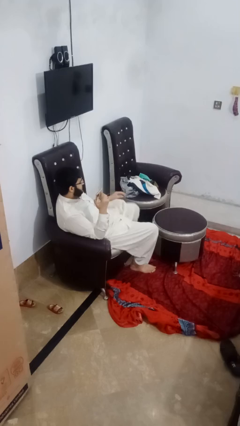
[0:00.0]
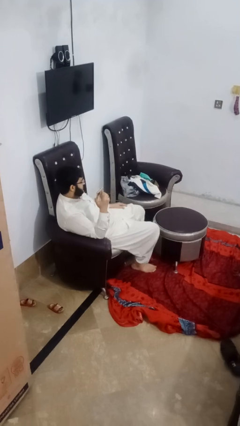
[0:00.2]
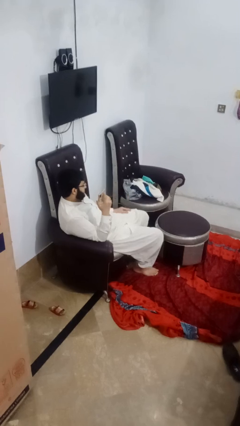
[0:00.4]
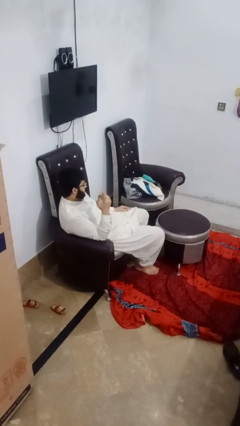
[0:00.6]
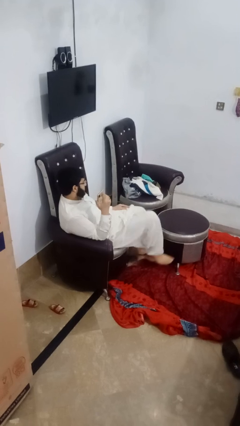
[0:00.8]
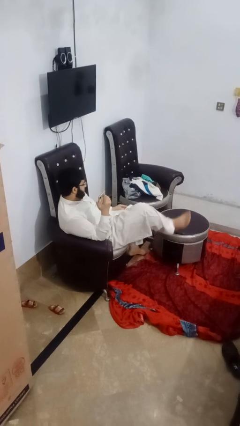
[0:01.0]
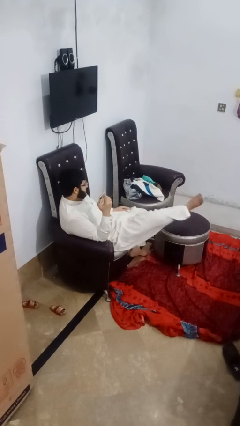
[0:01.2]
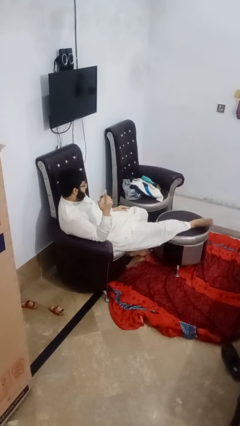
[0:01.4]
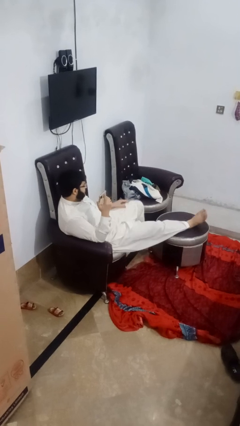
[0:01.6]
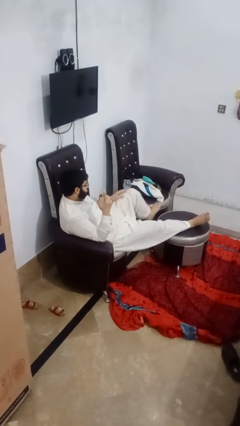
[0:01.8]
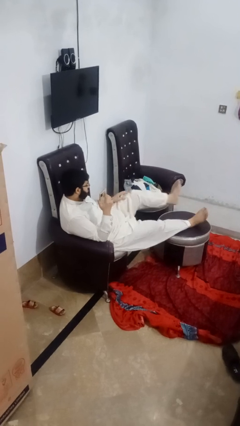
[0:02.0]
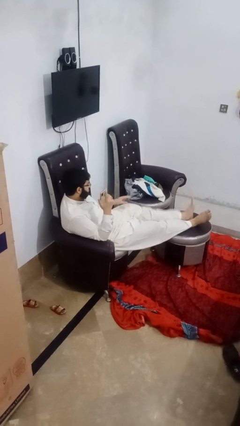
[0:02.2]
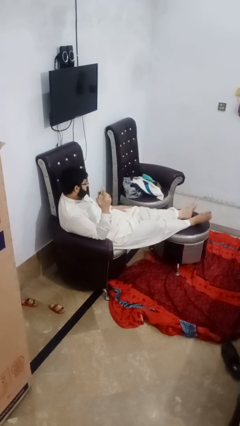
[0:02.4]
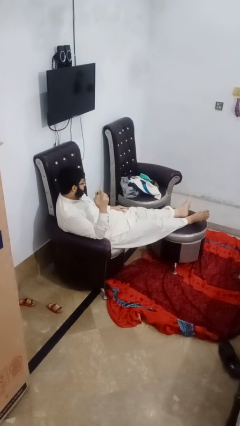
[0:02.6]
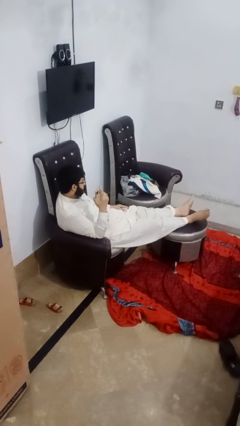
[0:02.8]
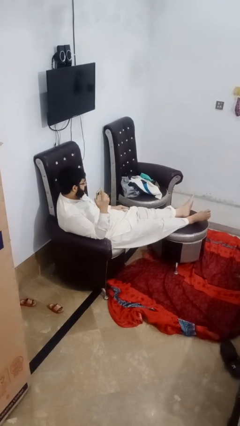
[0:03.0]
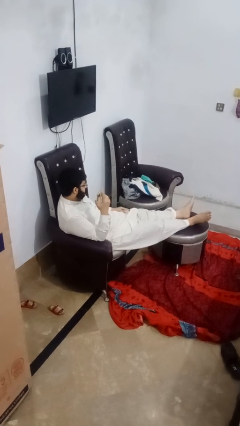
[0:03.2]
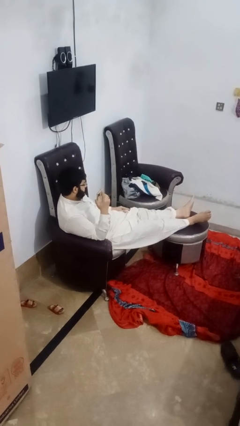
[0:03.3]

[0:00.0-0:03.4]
person puts feet up

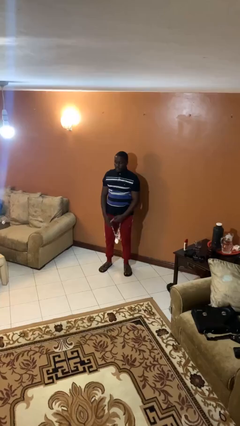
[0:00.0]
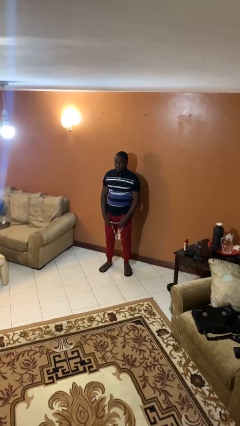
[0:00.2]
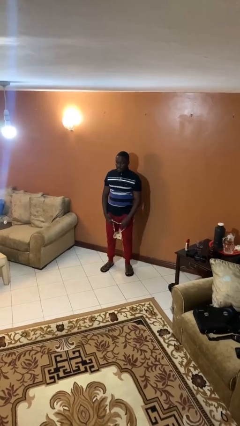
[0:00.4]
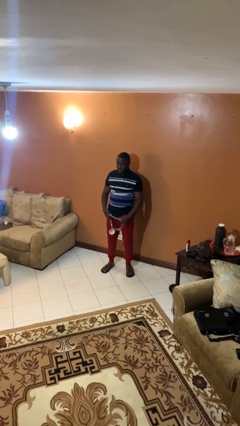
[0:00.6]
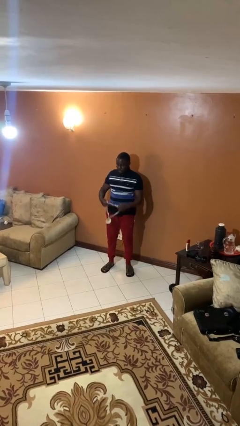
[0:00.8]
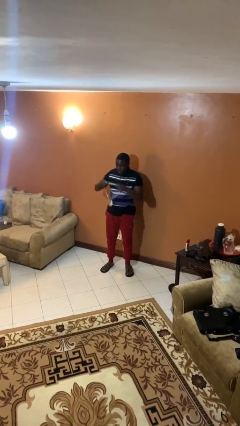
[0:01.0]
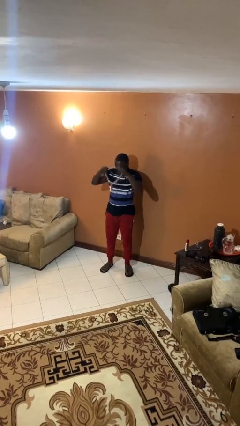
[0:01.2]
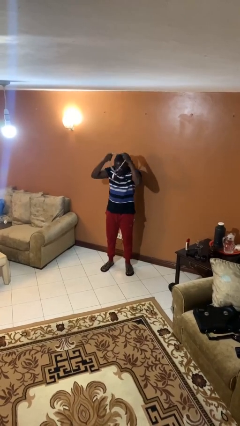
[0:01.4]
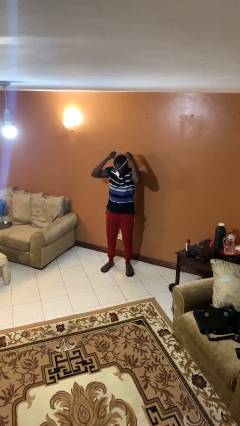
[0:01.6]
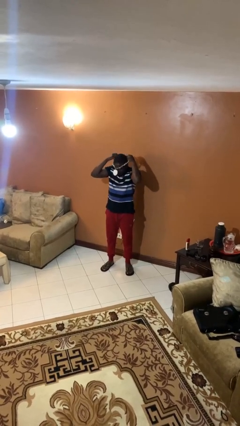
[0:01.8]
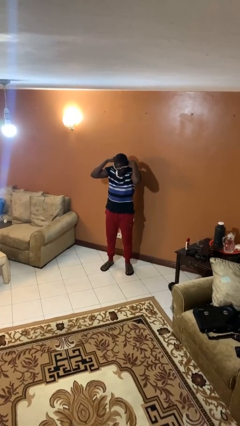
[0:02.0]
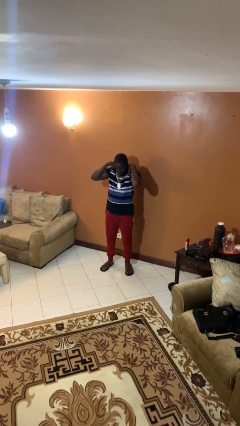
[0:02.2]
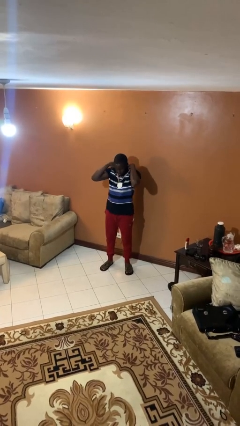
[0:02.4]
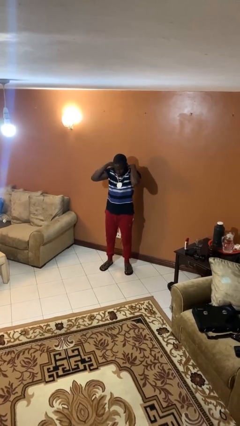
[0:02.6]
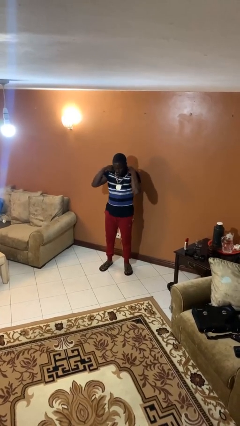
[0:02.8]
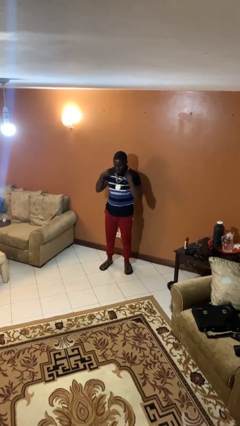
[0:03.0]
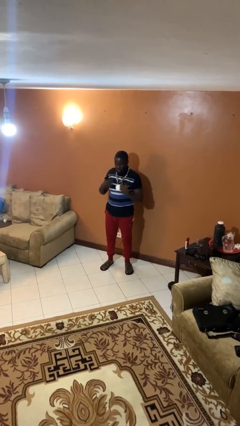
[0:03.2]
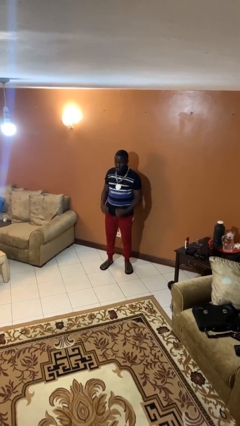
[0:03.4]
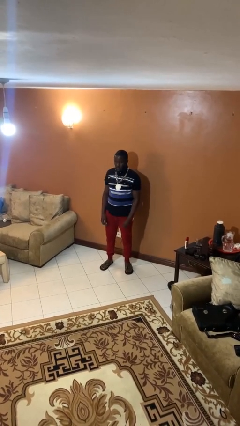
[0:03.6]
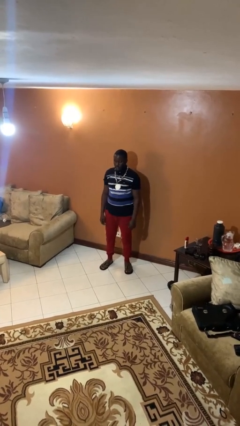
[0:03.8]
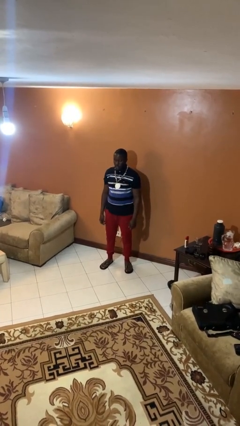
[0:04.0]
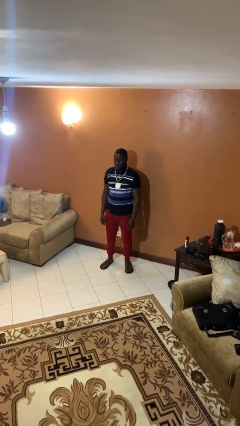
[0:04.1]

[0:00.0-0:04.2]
person puts on necklace

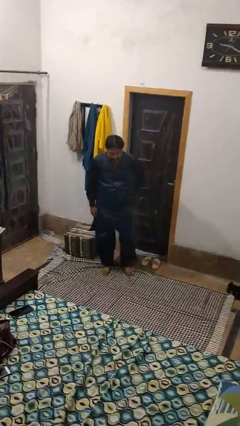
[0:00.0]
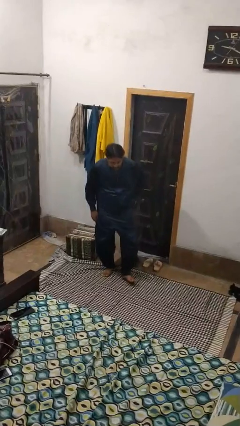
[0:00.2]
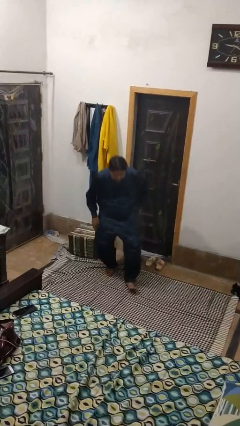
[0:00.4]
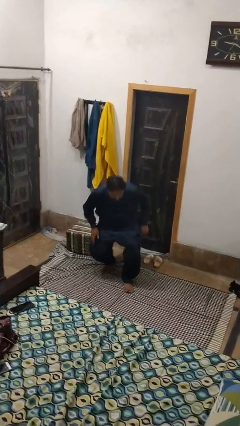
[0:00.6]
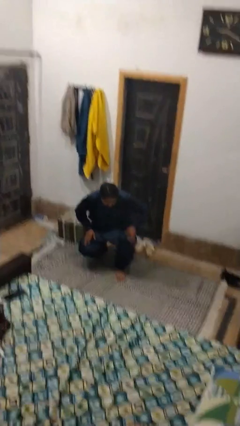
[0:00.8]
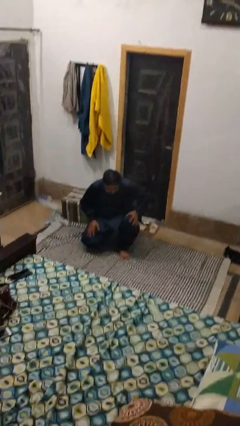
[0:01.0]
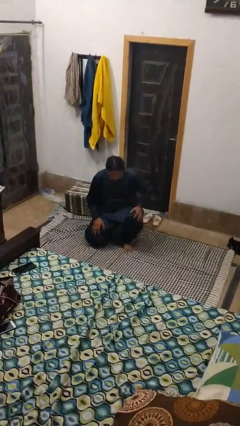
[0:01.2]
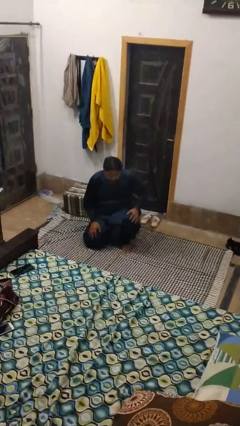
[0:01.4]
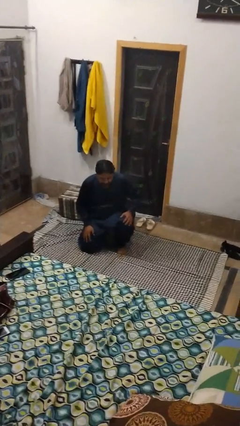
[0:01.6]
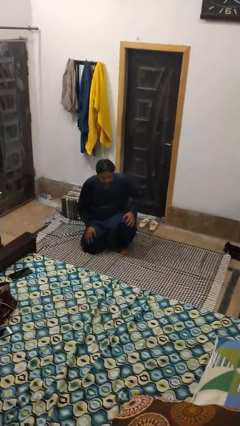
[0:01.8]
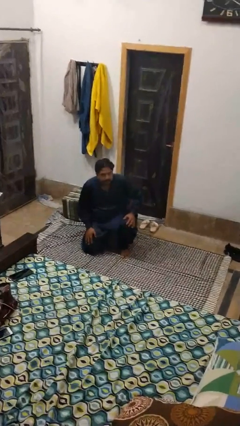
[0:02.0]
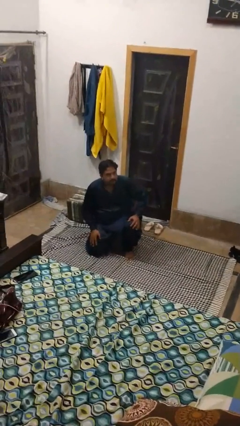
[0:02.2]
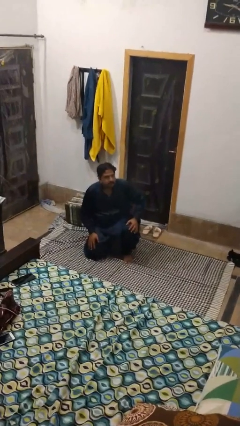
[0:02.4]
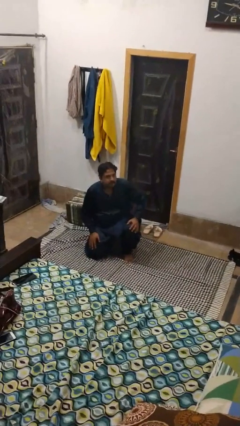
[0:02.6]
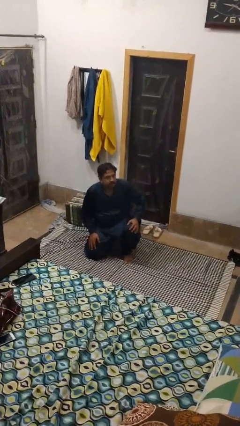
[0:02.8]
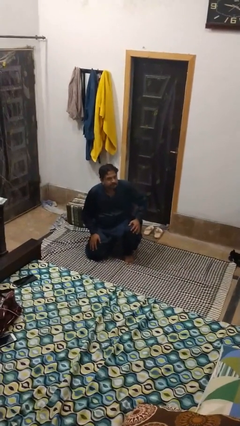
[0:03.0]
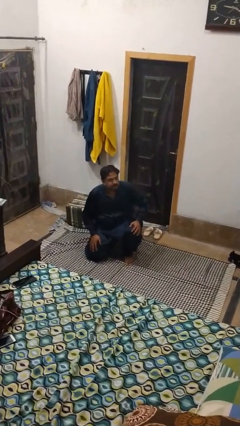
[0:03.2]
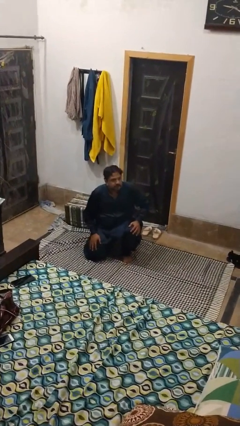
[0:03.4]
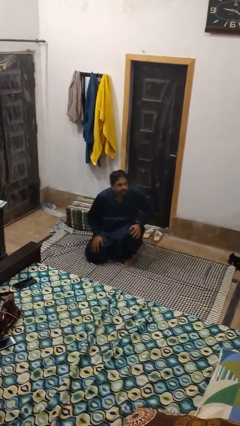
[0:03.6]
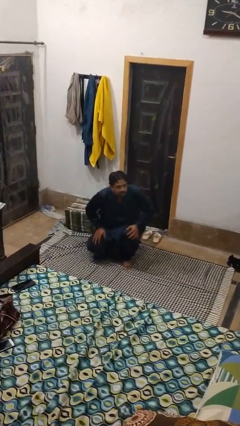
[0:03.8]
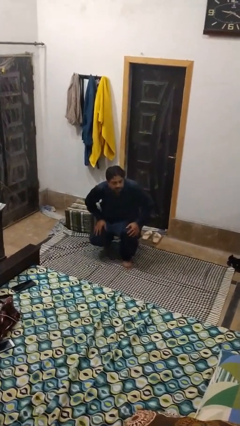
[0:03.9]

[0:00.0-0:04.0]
person kneels

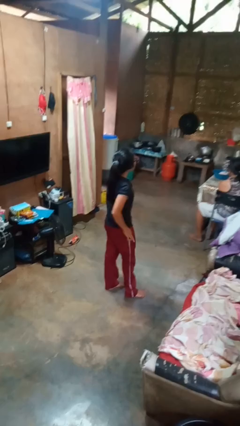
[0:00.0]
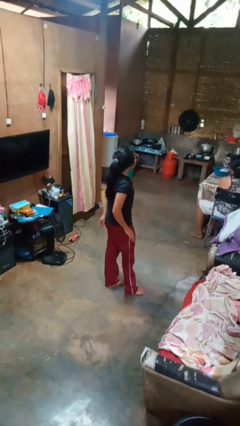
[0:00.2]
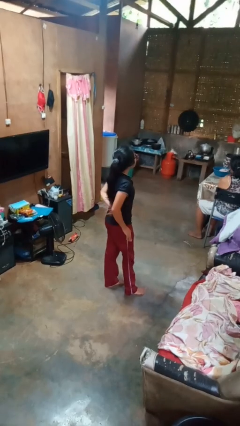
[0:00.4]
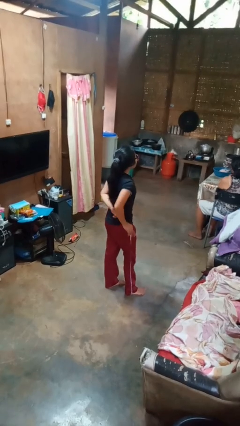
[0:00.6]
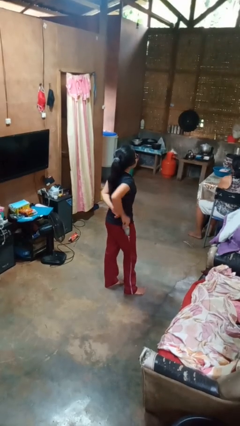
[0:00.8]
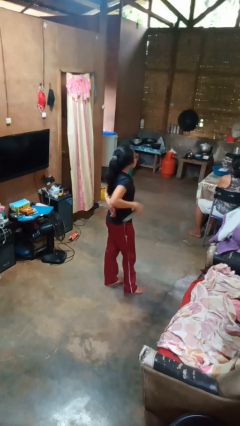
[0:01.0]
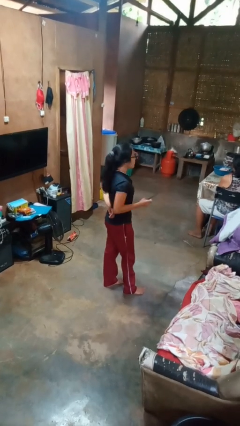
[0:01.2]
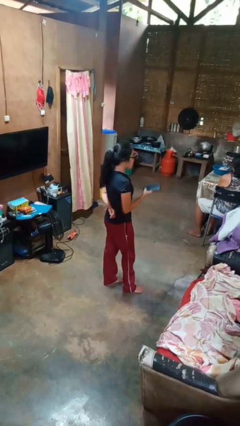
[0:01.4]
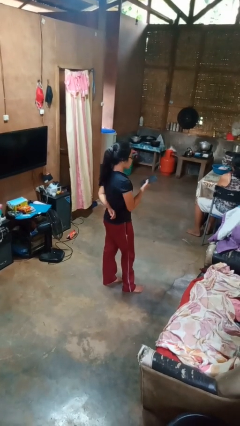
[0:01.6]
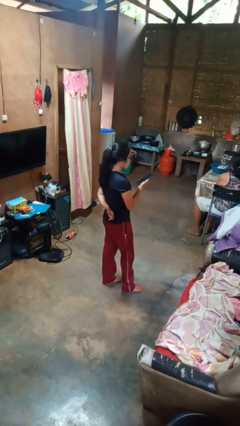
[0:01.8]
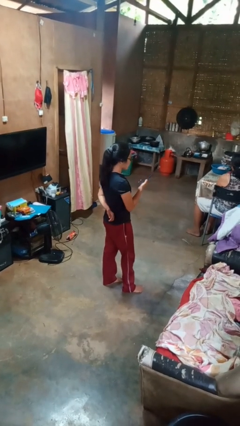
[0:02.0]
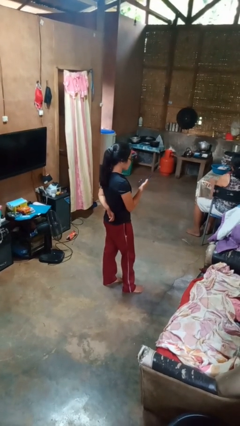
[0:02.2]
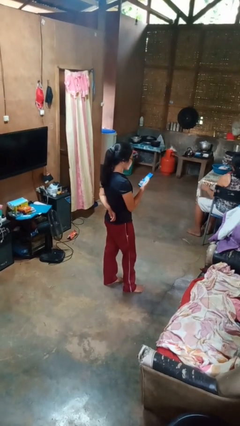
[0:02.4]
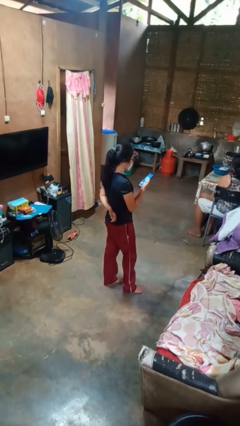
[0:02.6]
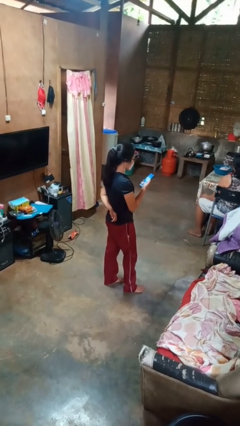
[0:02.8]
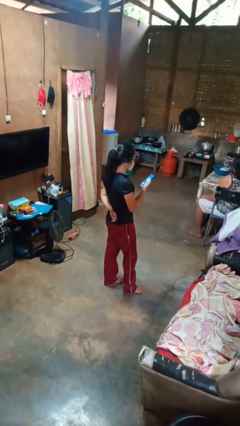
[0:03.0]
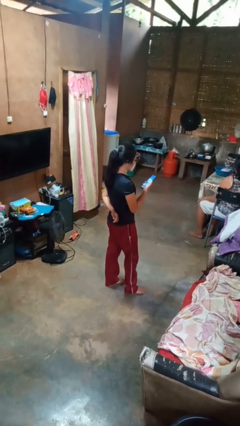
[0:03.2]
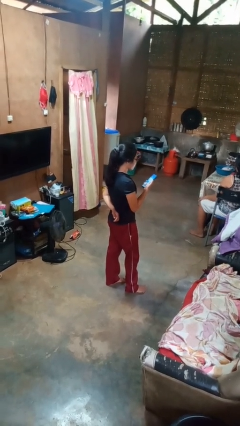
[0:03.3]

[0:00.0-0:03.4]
person takes phone from pocket

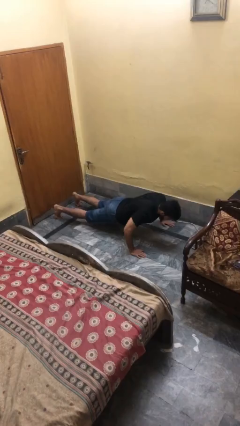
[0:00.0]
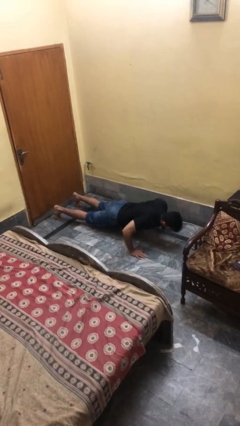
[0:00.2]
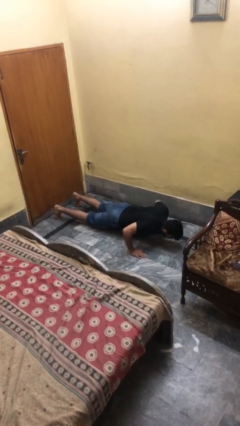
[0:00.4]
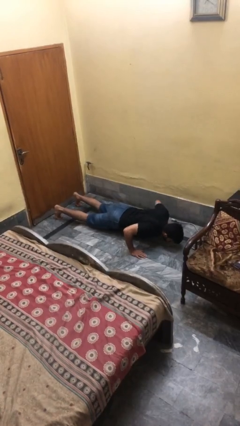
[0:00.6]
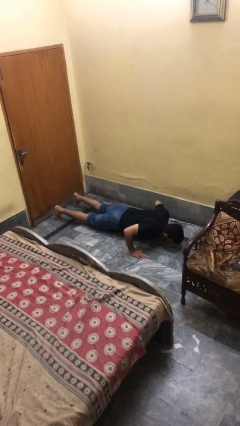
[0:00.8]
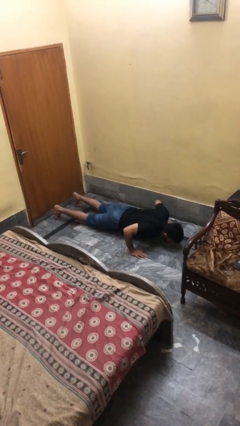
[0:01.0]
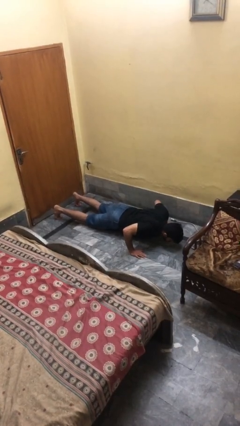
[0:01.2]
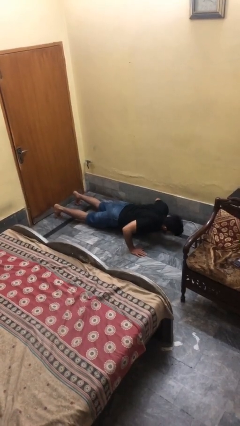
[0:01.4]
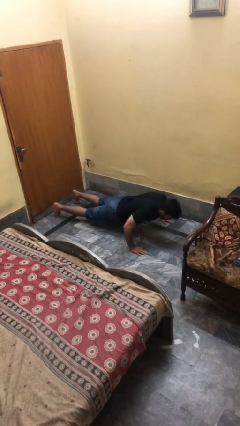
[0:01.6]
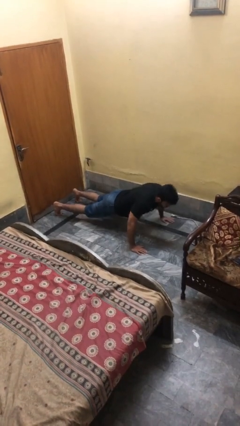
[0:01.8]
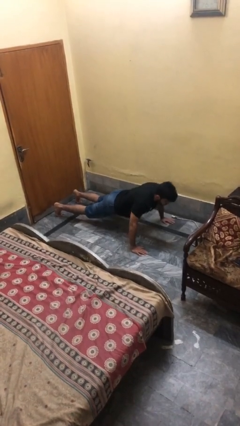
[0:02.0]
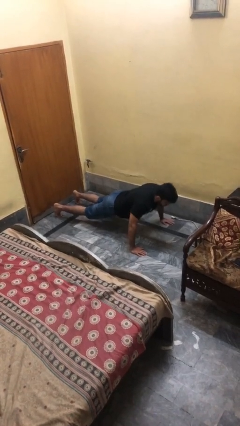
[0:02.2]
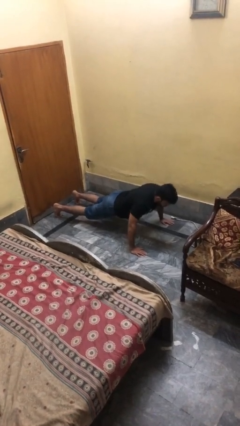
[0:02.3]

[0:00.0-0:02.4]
person exercises with pushup

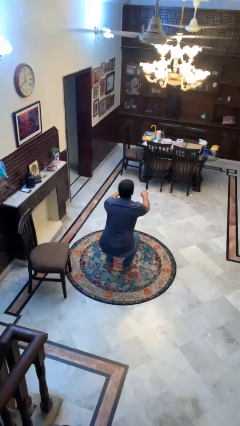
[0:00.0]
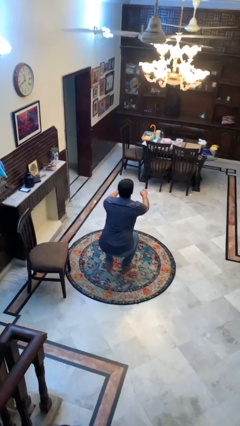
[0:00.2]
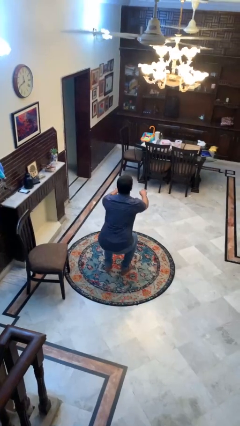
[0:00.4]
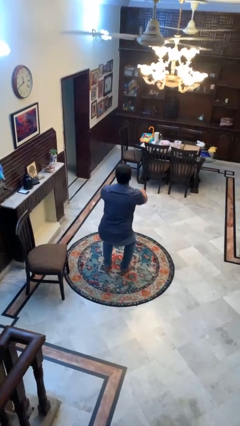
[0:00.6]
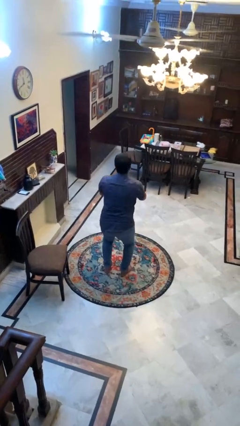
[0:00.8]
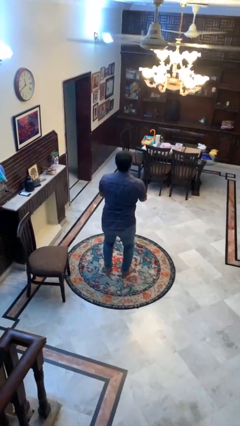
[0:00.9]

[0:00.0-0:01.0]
person stands up
